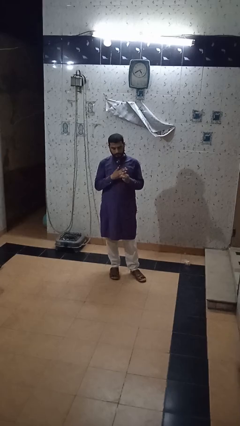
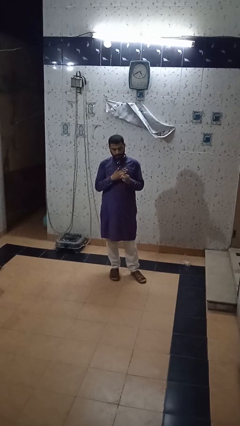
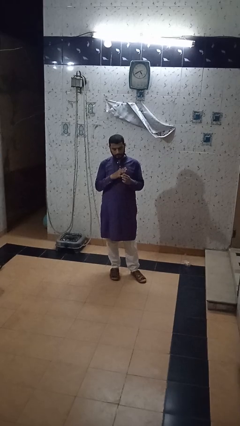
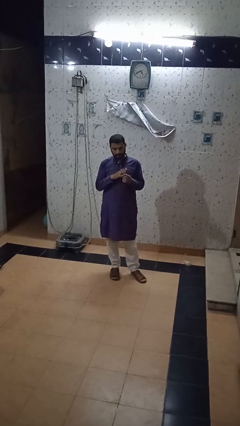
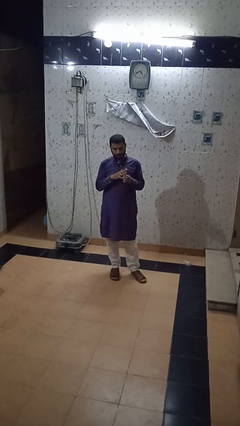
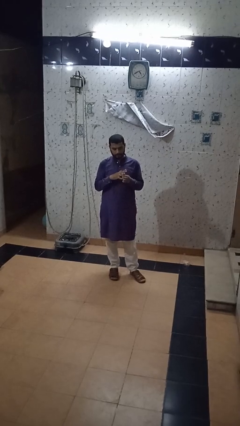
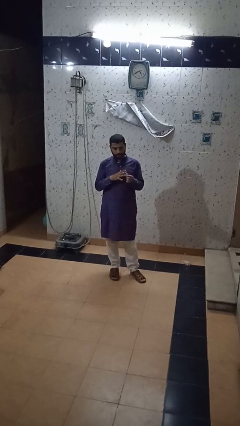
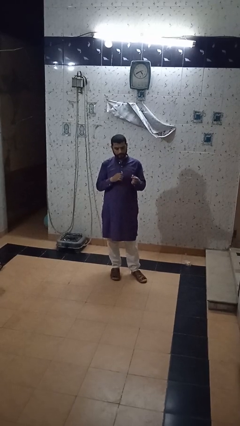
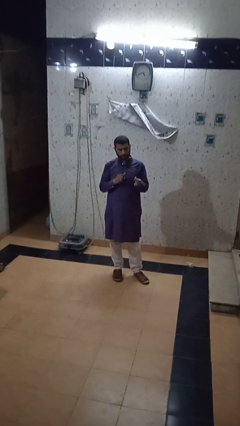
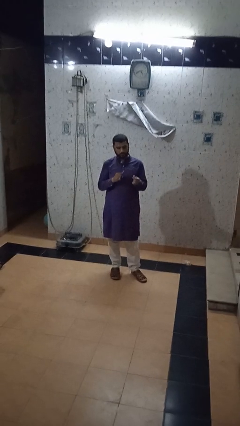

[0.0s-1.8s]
person takes off ring

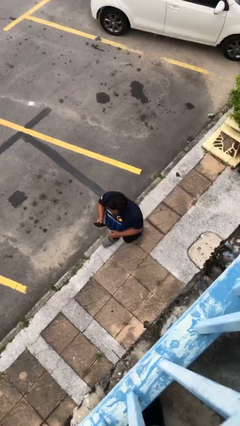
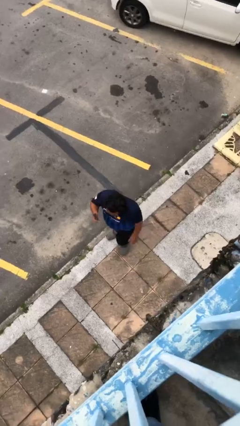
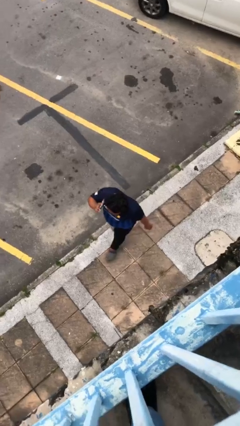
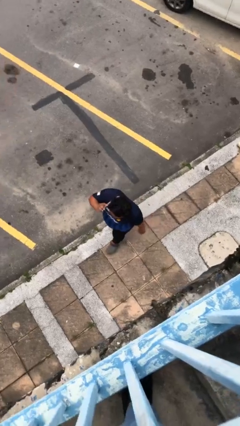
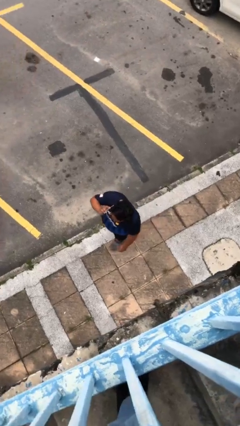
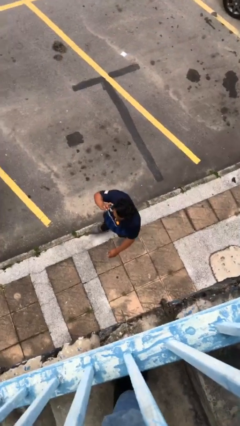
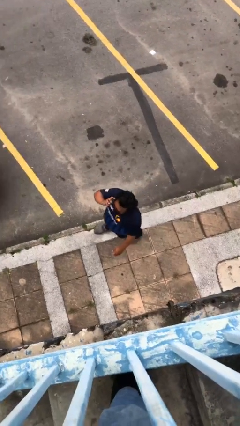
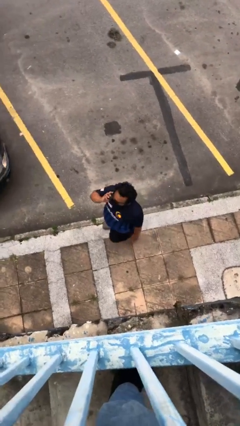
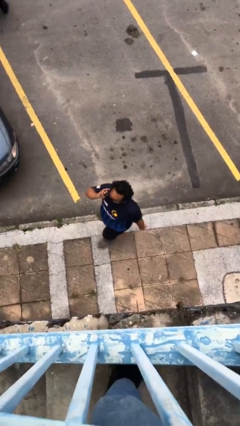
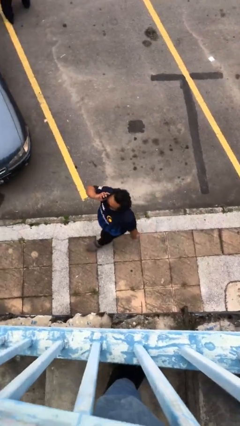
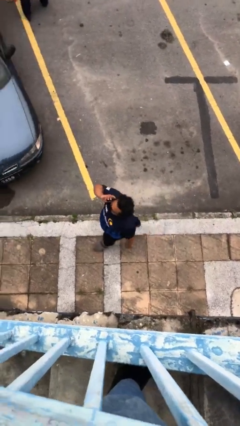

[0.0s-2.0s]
person talks on phone

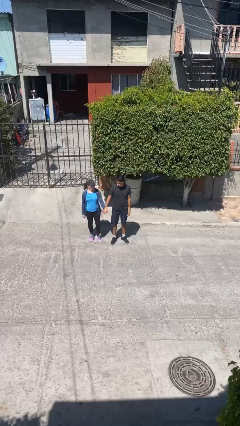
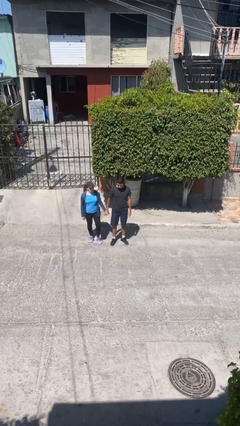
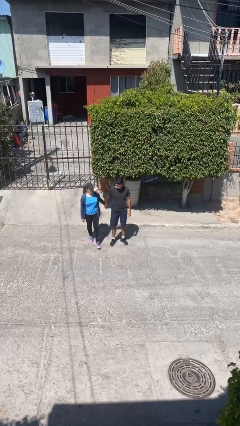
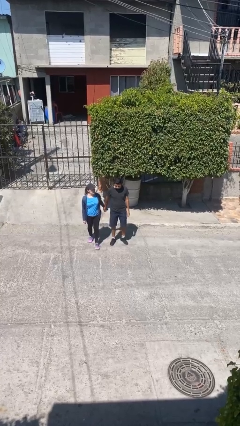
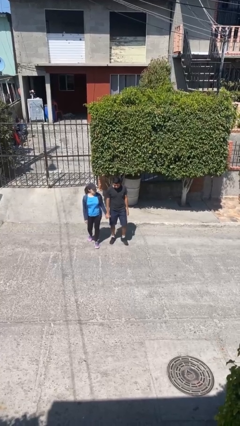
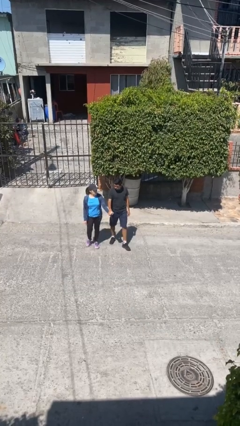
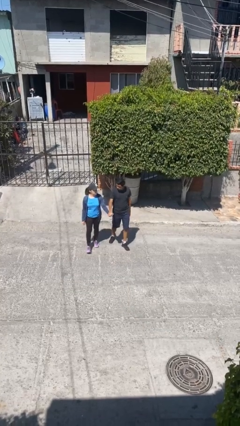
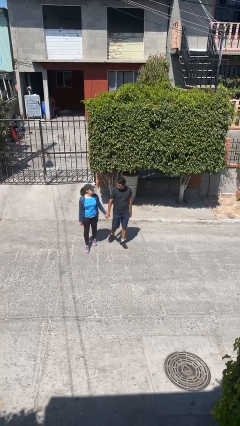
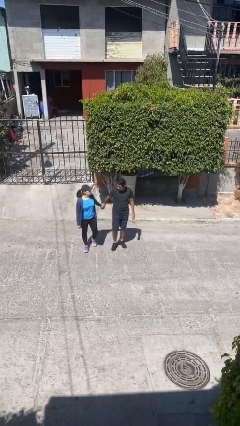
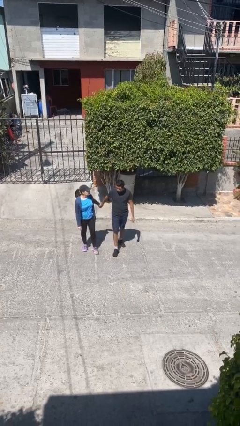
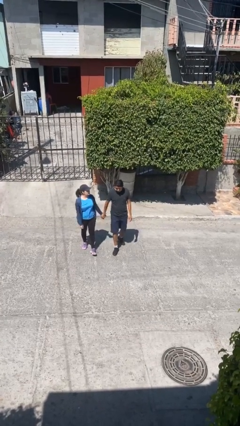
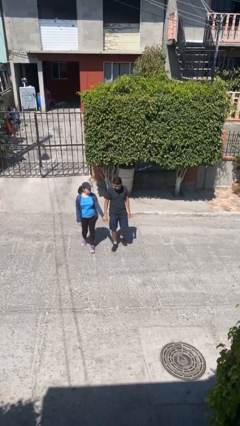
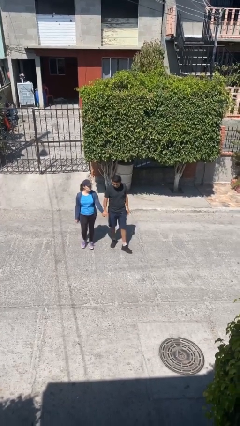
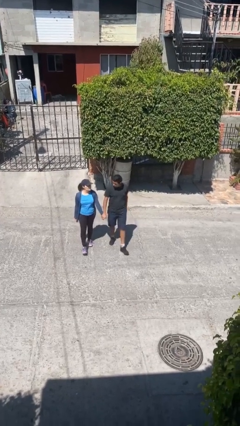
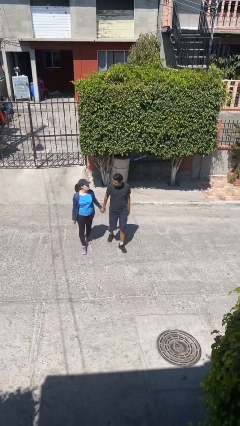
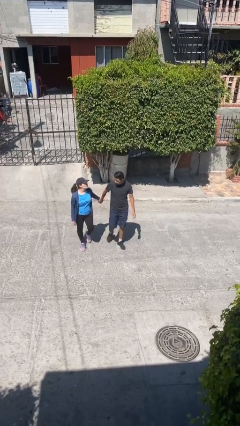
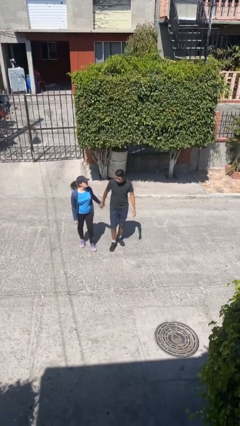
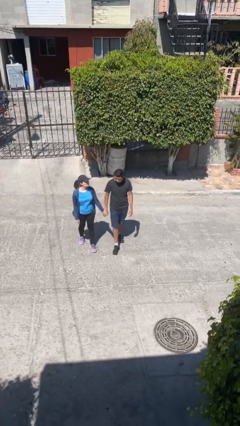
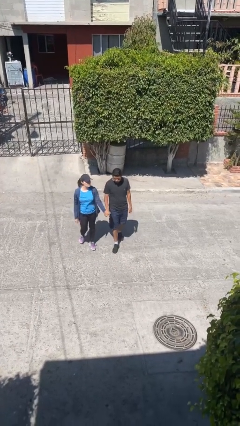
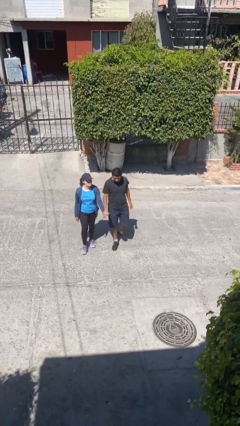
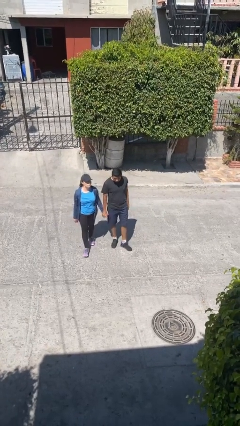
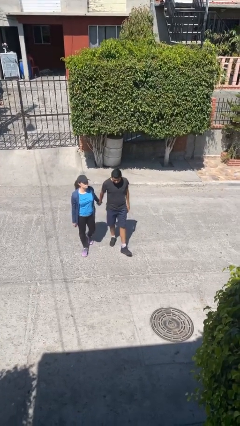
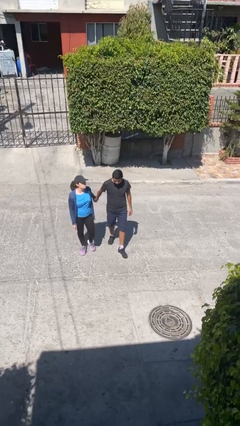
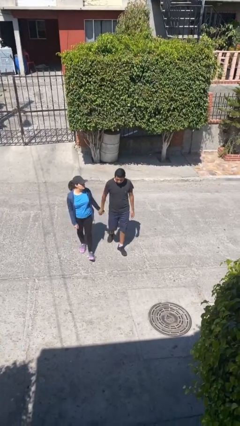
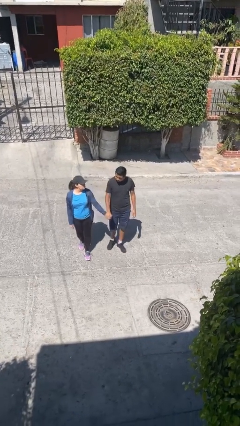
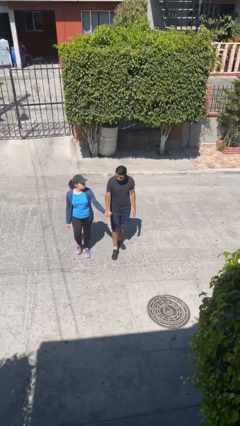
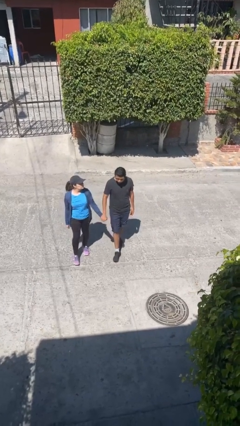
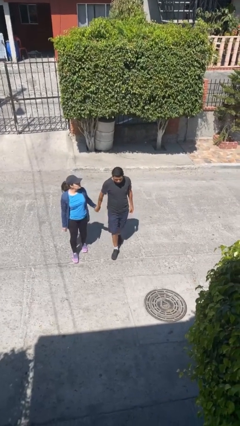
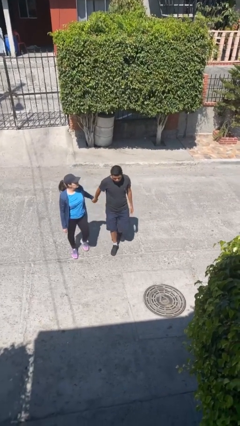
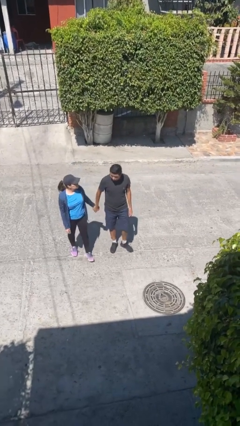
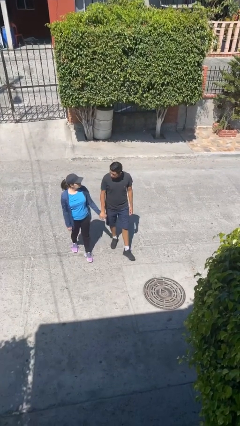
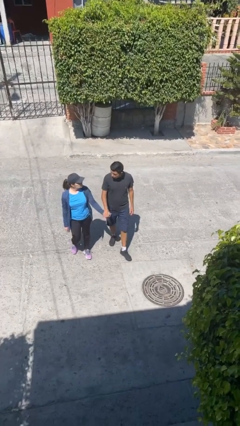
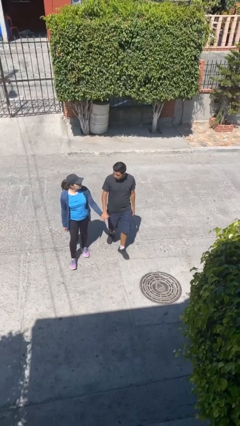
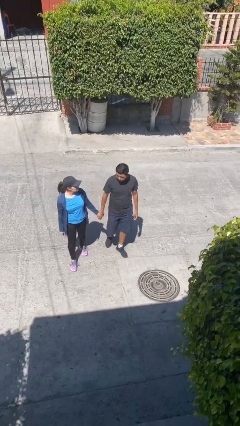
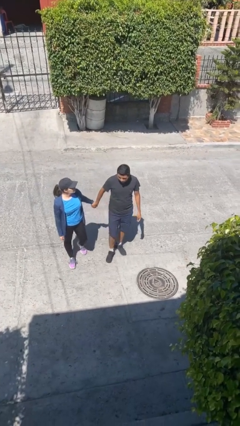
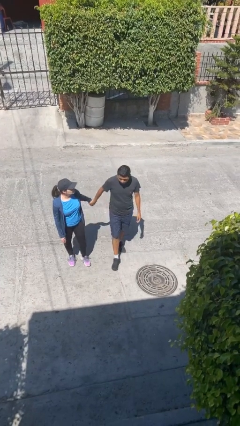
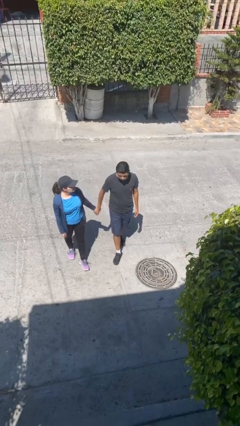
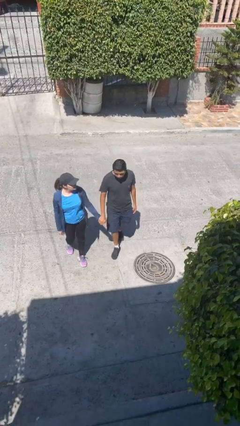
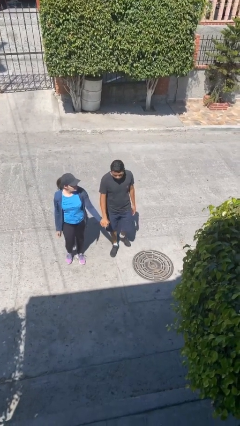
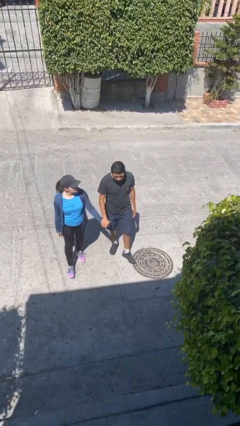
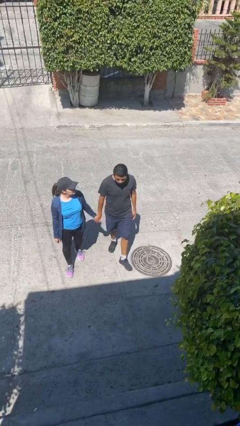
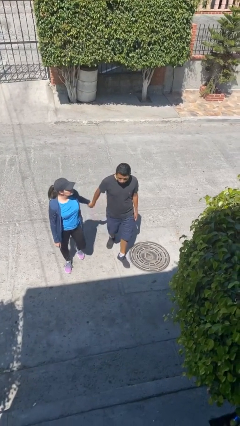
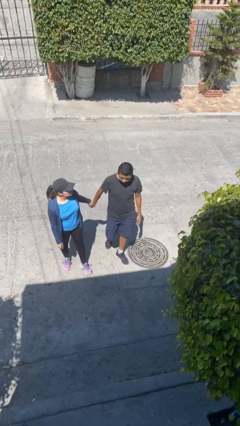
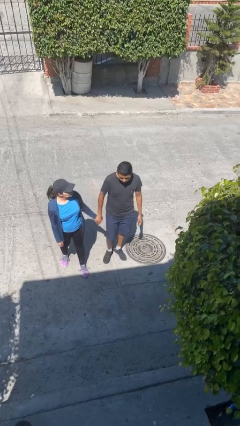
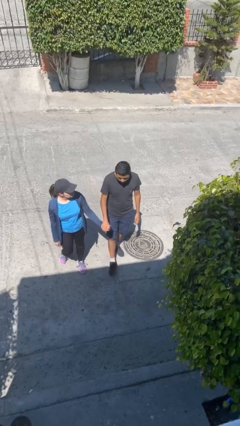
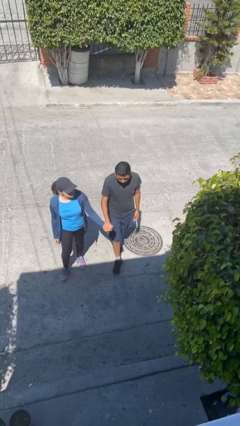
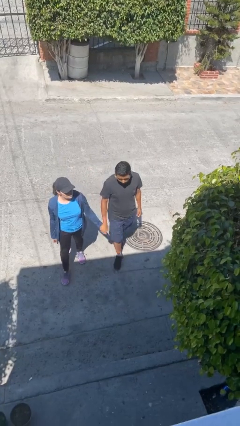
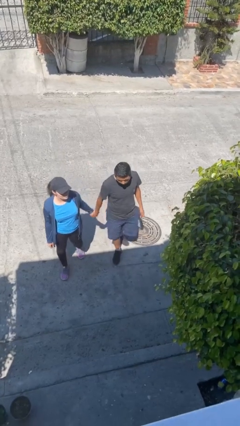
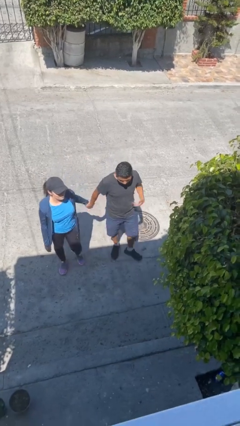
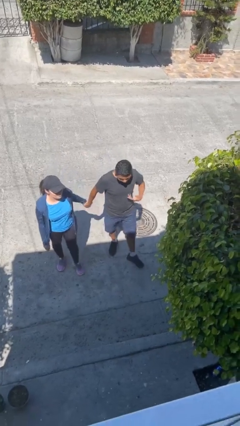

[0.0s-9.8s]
person holds hand

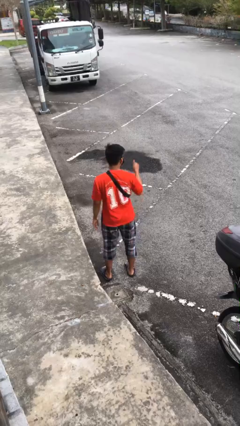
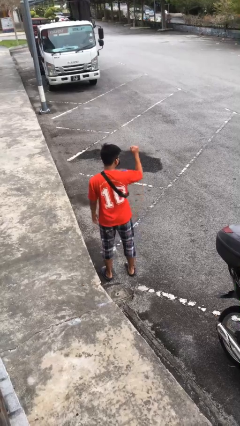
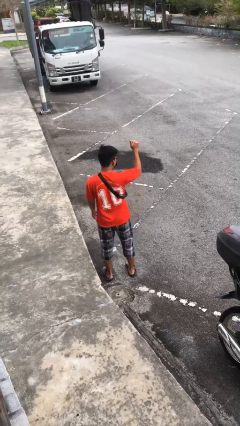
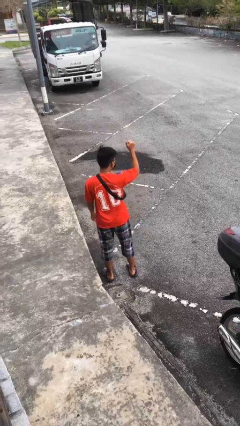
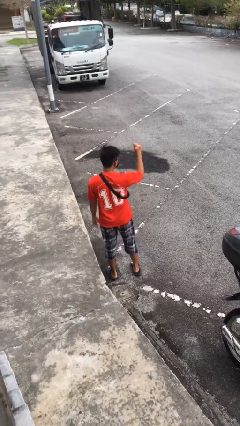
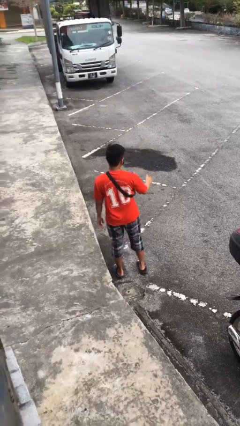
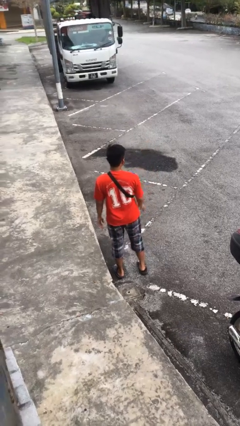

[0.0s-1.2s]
person gestures thumbs up

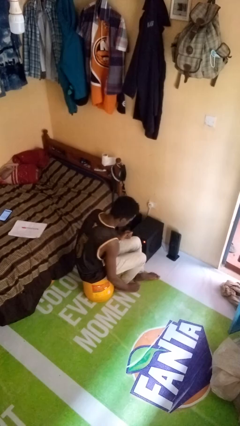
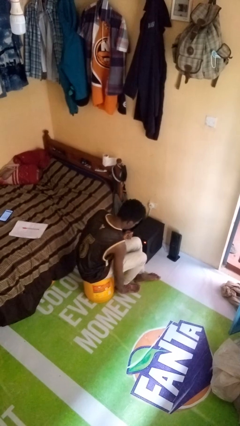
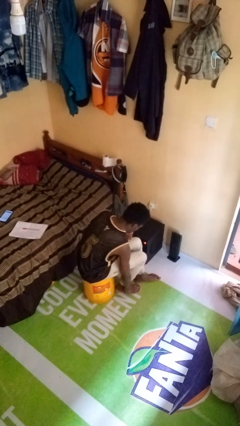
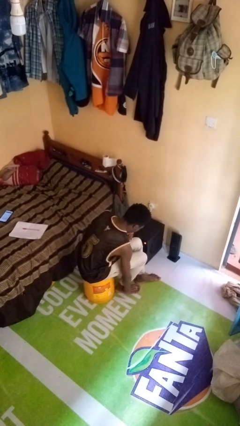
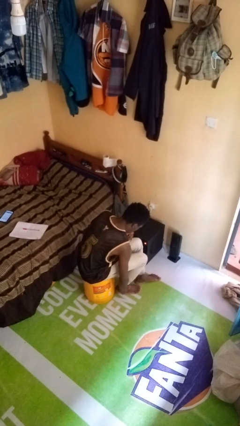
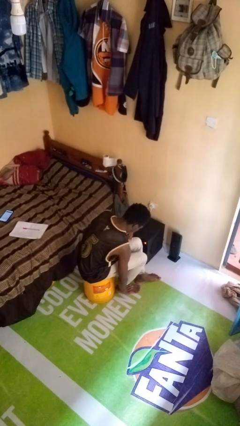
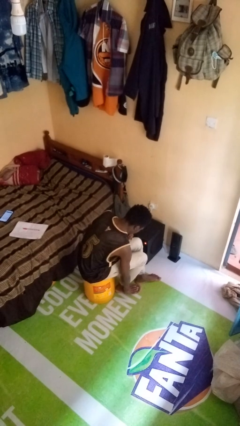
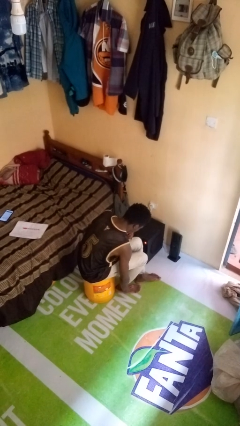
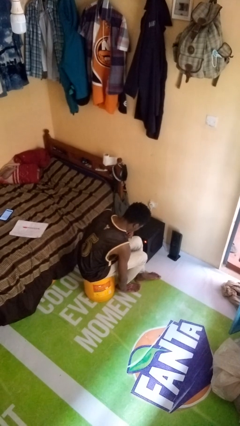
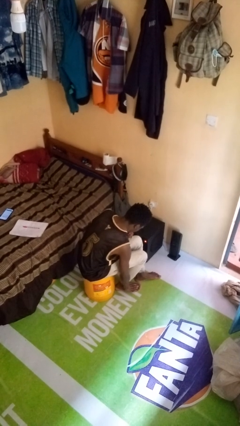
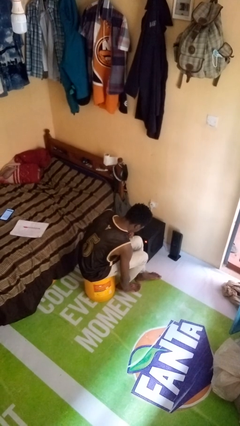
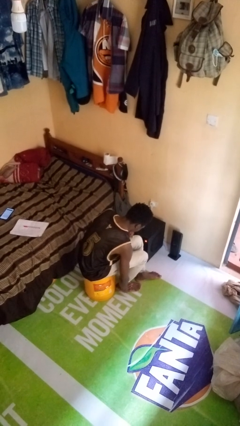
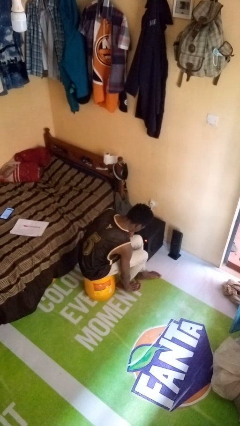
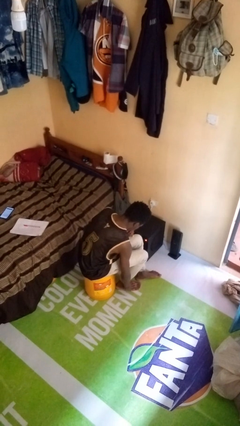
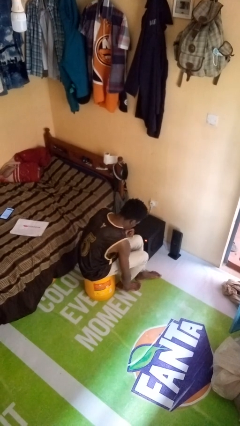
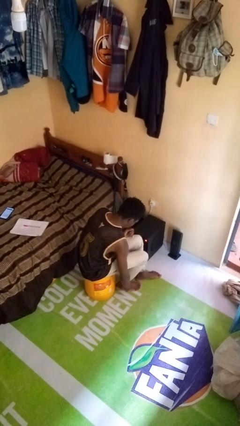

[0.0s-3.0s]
person rubs foot
